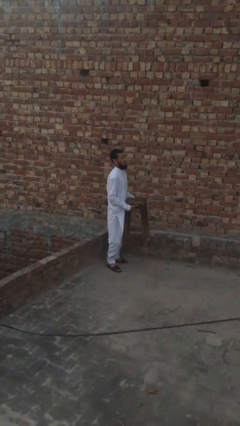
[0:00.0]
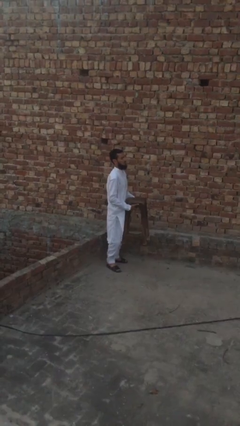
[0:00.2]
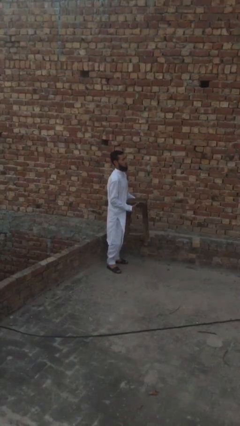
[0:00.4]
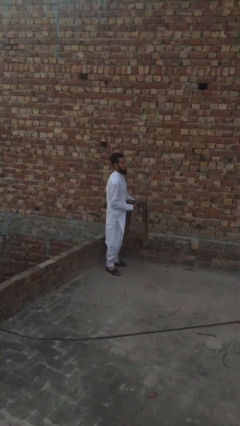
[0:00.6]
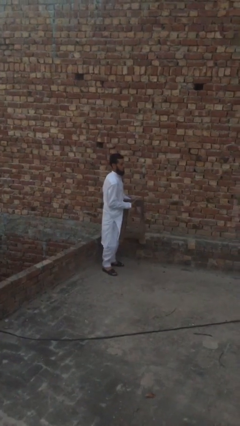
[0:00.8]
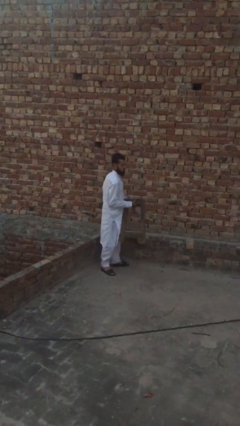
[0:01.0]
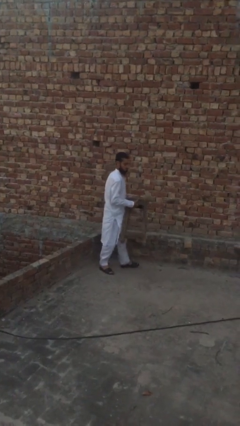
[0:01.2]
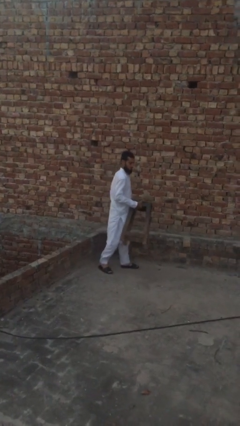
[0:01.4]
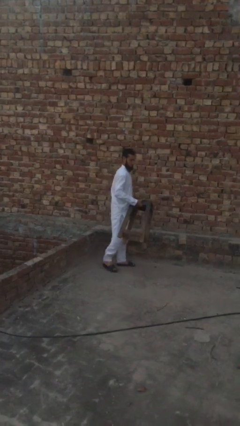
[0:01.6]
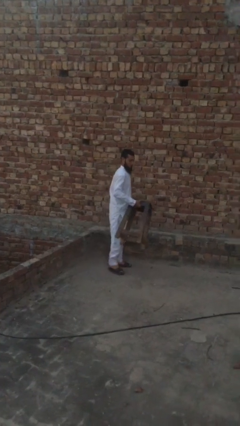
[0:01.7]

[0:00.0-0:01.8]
person carries heavy object

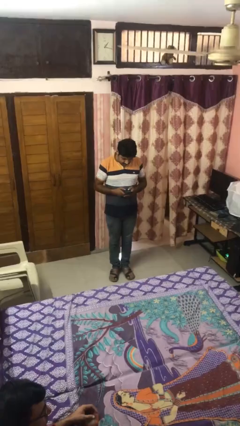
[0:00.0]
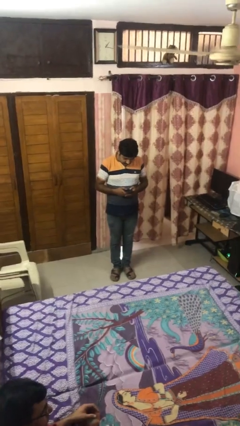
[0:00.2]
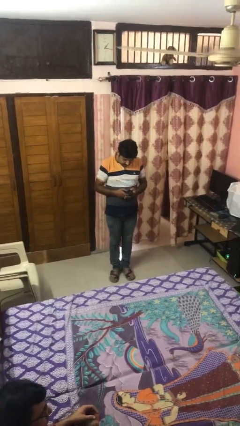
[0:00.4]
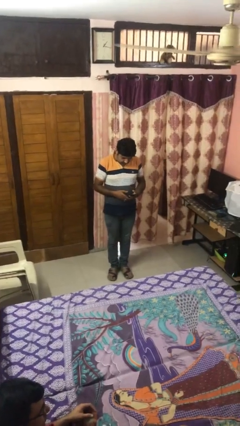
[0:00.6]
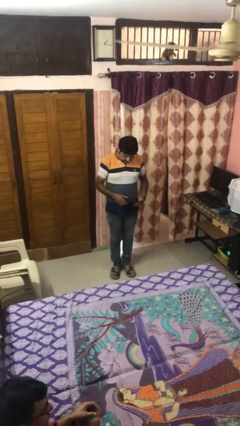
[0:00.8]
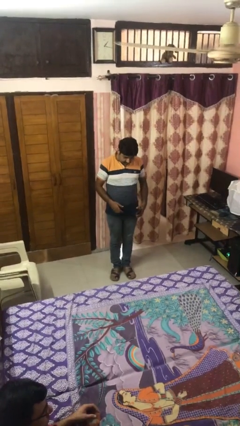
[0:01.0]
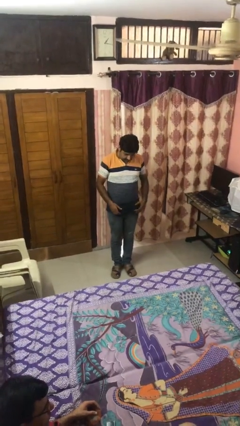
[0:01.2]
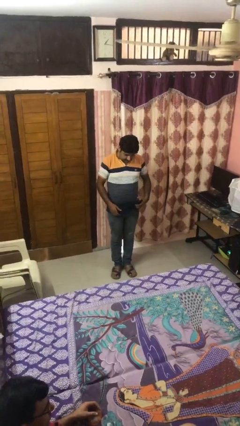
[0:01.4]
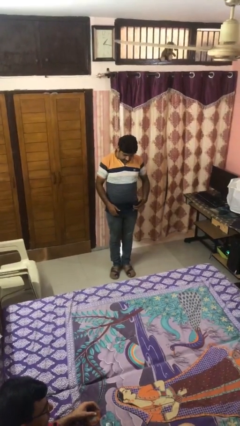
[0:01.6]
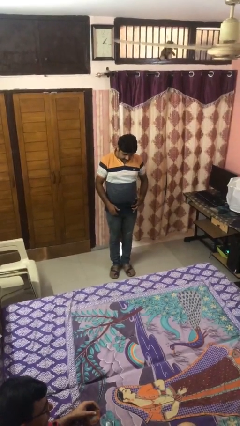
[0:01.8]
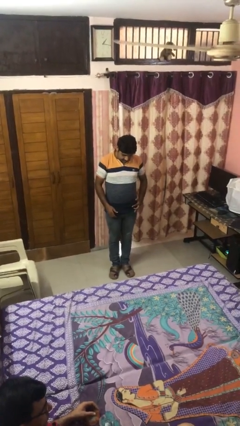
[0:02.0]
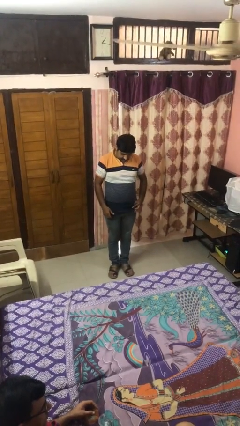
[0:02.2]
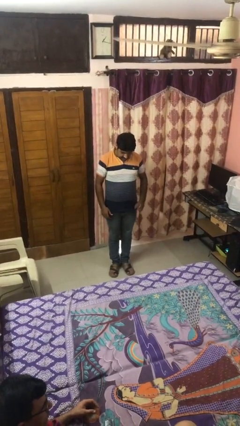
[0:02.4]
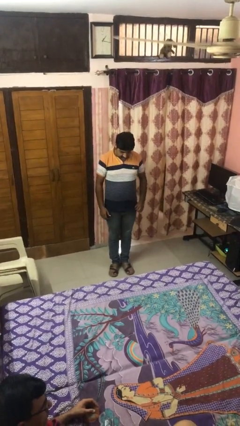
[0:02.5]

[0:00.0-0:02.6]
person puts phone into pocket

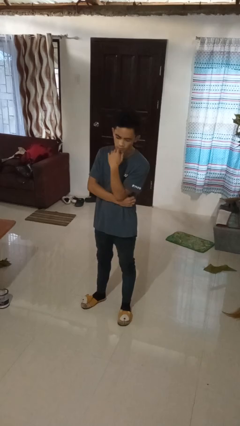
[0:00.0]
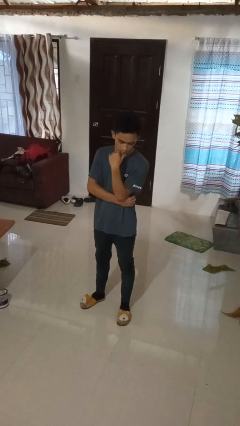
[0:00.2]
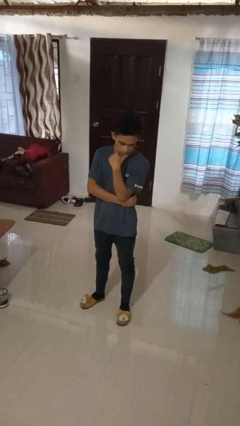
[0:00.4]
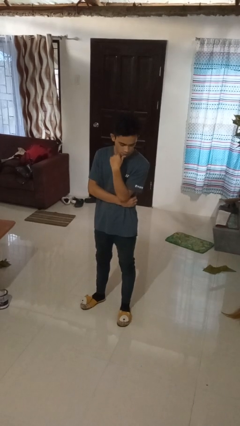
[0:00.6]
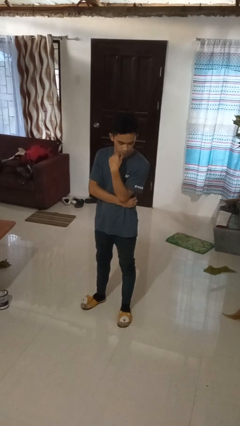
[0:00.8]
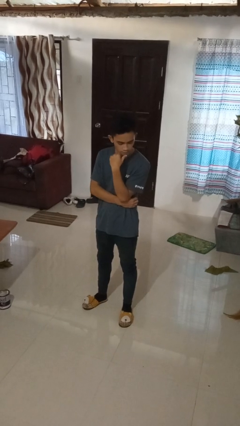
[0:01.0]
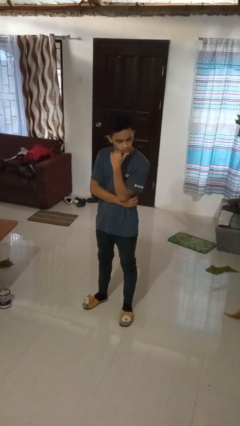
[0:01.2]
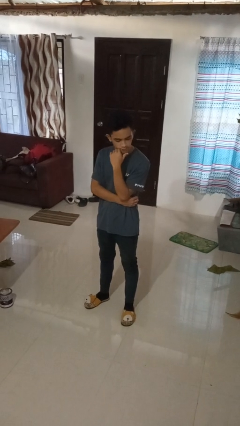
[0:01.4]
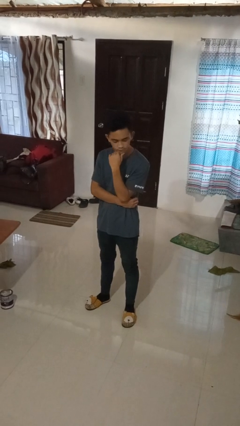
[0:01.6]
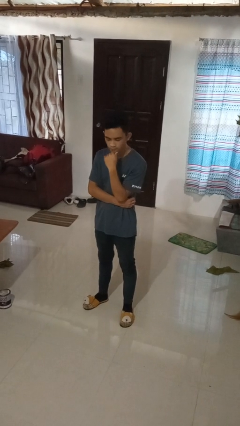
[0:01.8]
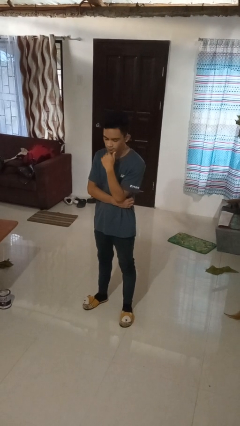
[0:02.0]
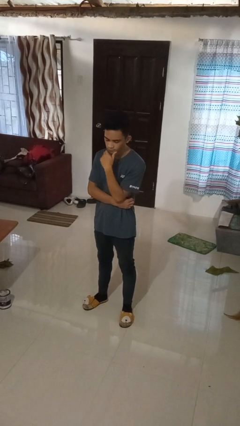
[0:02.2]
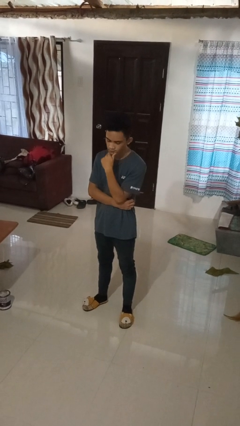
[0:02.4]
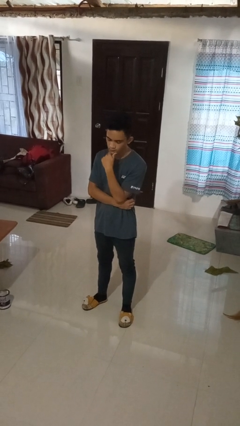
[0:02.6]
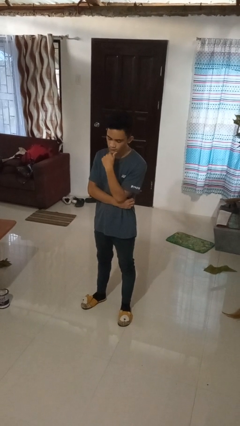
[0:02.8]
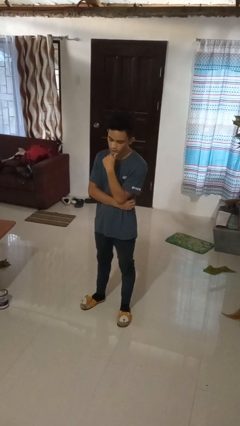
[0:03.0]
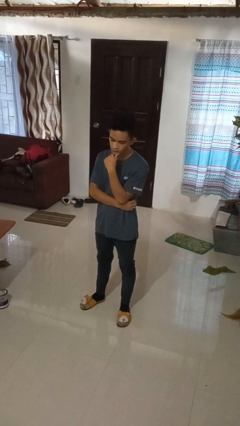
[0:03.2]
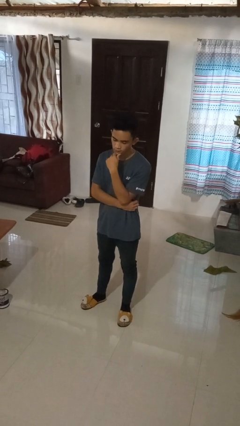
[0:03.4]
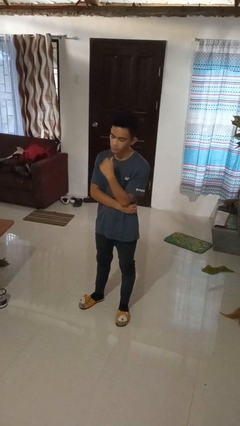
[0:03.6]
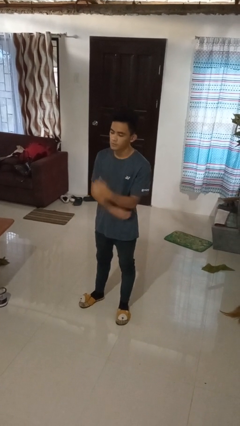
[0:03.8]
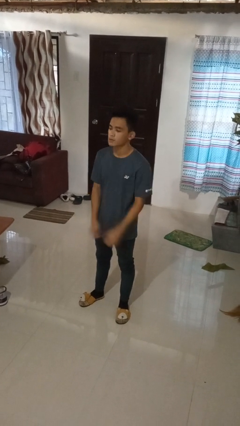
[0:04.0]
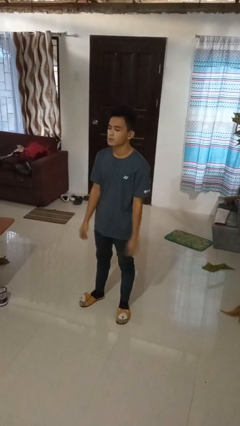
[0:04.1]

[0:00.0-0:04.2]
person strokes chin

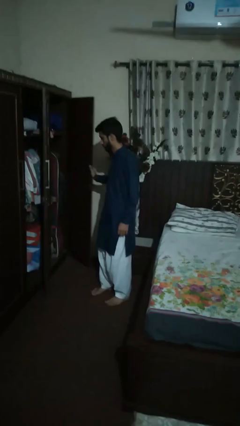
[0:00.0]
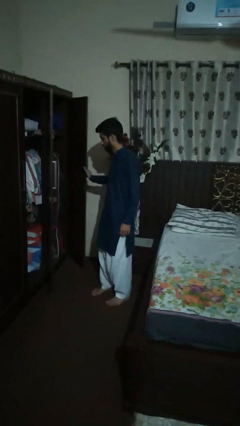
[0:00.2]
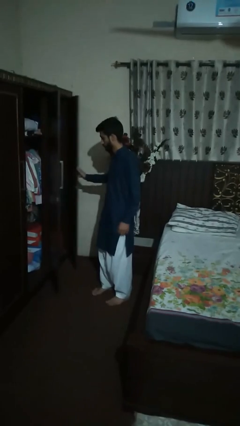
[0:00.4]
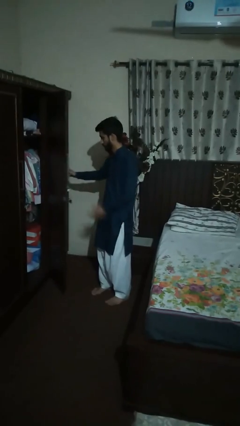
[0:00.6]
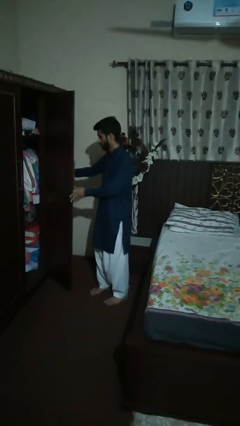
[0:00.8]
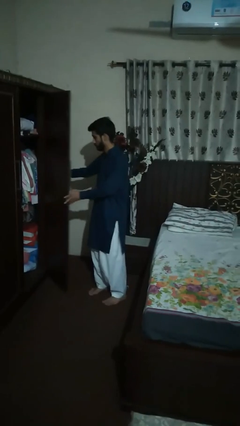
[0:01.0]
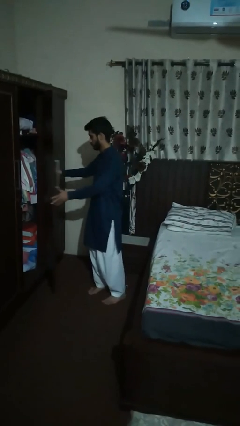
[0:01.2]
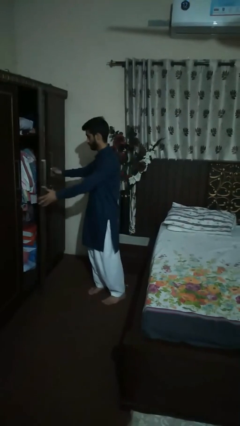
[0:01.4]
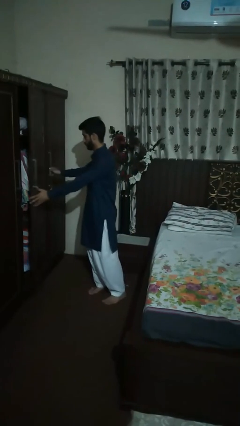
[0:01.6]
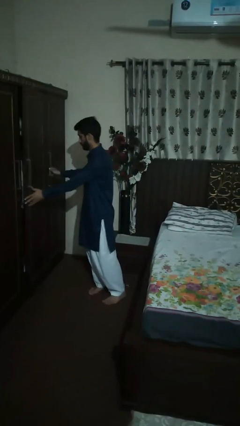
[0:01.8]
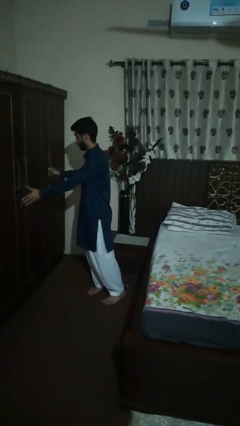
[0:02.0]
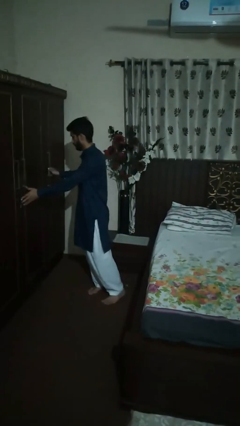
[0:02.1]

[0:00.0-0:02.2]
person closes dresser drawer

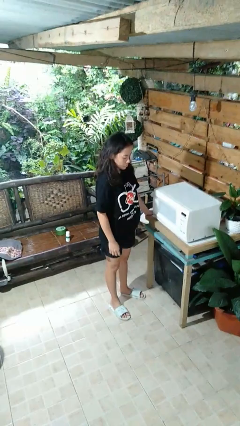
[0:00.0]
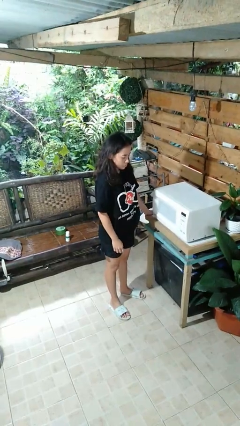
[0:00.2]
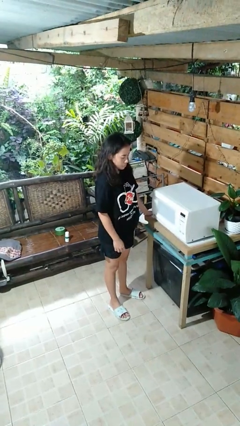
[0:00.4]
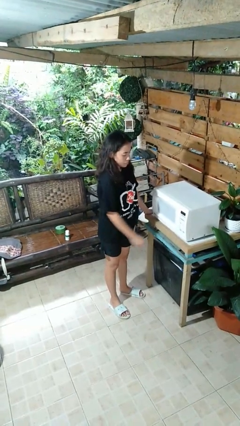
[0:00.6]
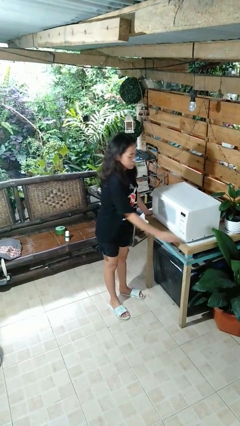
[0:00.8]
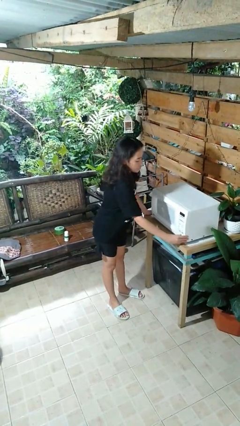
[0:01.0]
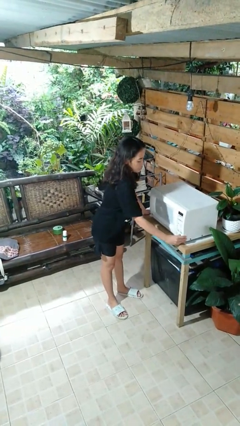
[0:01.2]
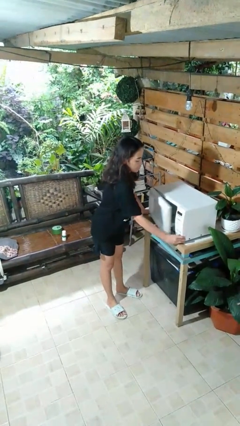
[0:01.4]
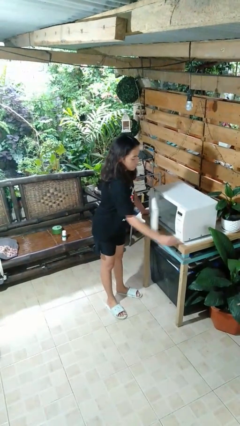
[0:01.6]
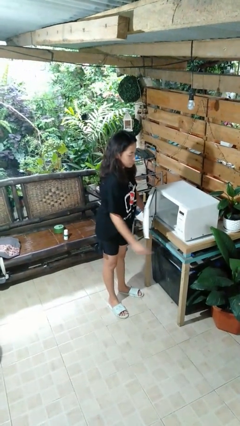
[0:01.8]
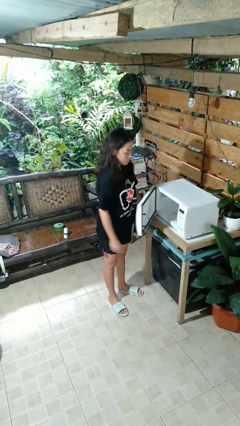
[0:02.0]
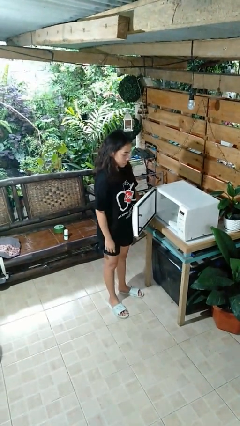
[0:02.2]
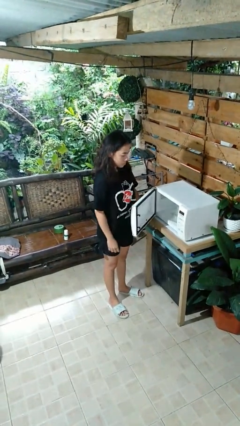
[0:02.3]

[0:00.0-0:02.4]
person opens microwave

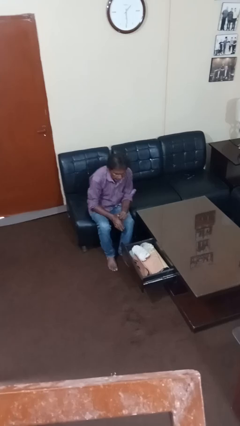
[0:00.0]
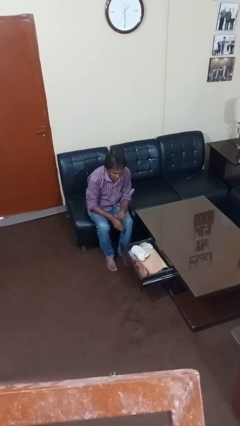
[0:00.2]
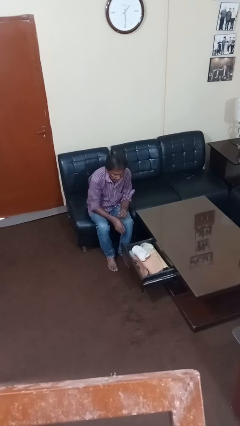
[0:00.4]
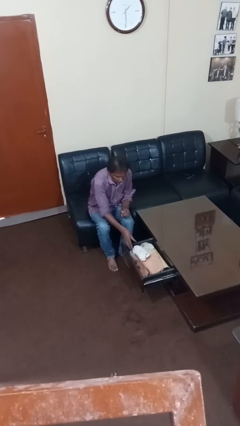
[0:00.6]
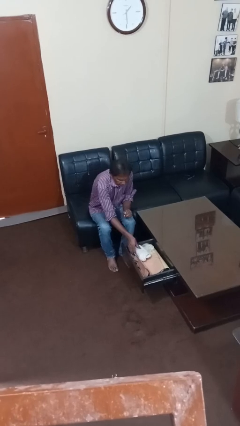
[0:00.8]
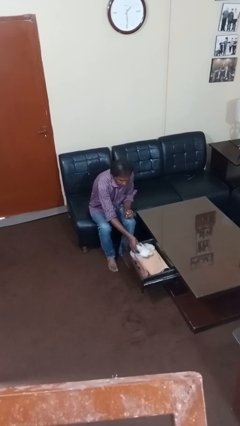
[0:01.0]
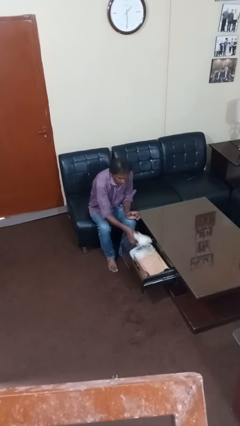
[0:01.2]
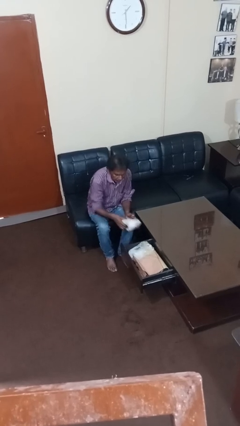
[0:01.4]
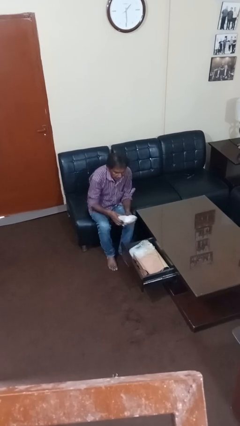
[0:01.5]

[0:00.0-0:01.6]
person takes clothes from dresser

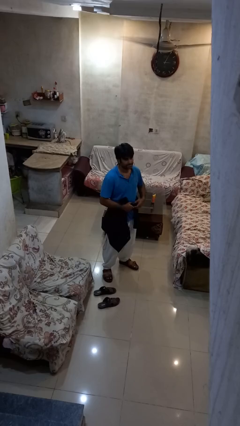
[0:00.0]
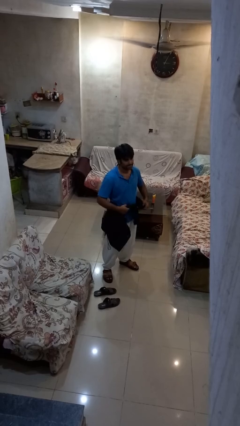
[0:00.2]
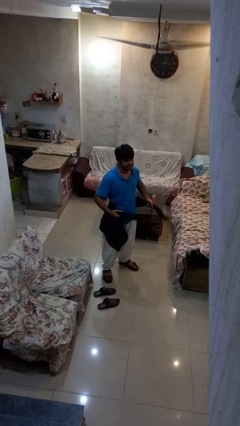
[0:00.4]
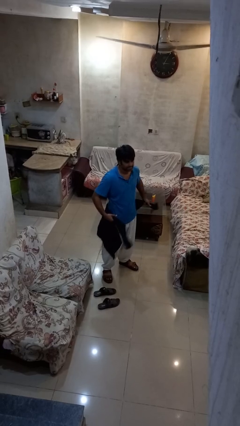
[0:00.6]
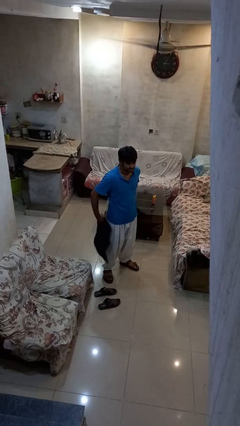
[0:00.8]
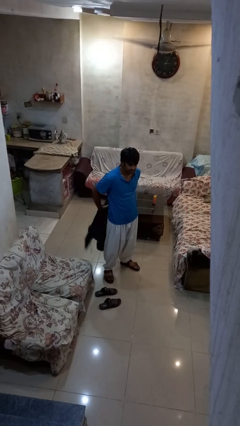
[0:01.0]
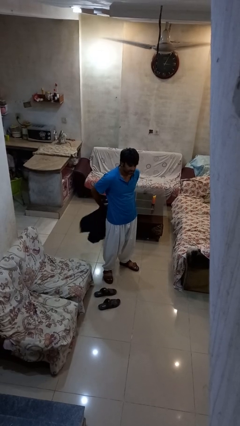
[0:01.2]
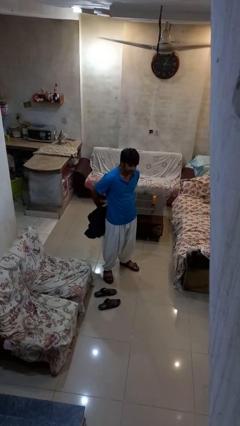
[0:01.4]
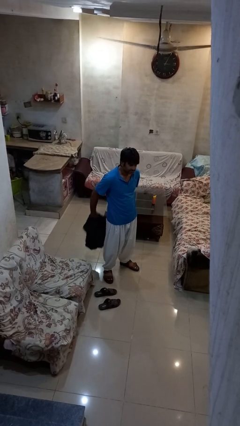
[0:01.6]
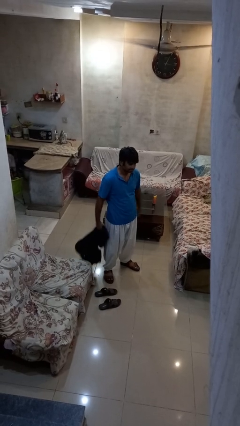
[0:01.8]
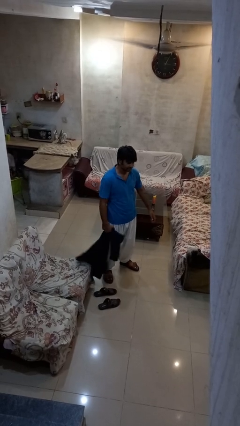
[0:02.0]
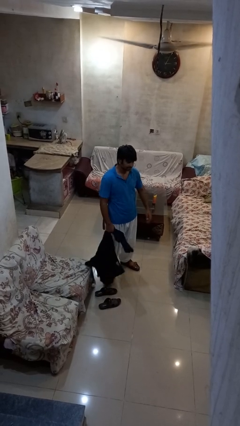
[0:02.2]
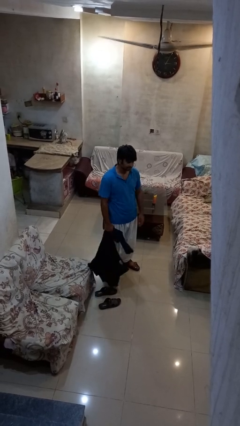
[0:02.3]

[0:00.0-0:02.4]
person unties jacket around waist
